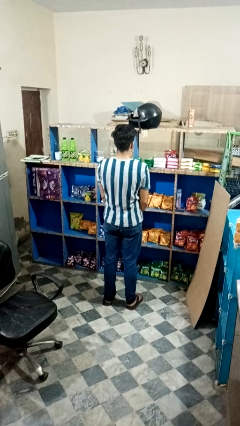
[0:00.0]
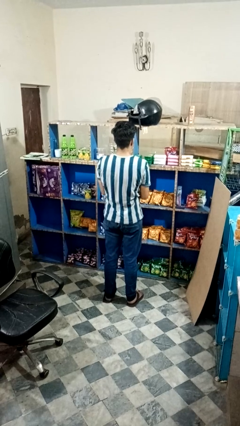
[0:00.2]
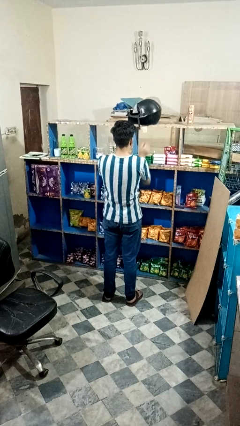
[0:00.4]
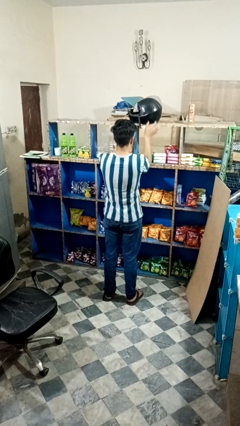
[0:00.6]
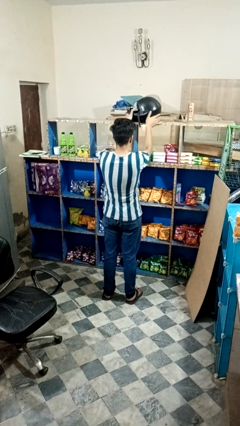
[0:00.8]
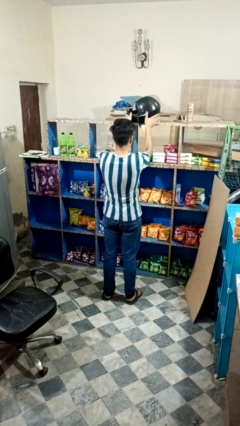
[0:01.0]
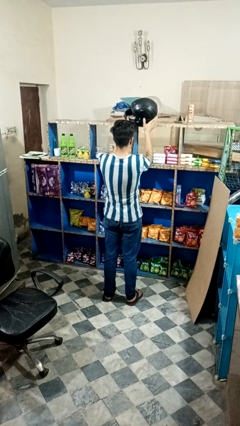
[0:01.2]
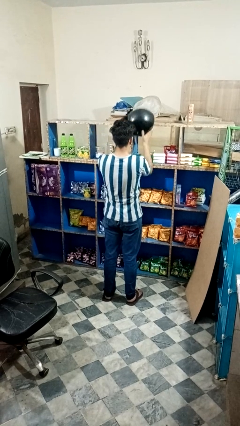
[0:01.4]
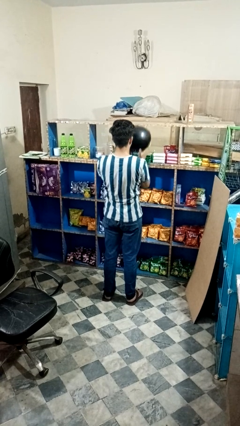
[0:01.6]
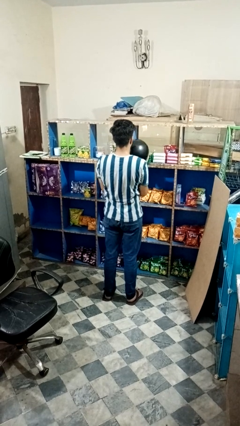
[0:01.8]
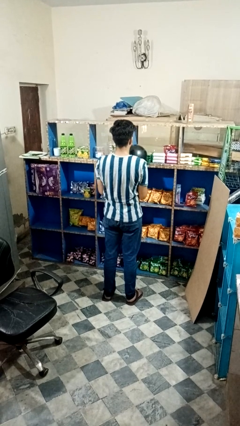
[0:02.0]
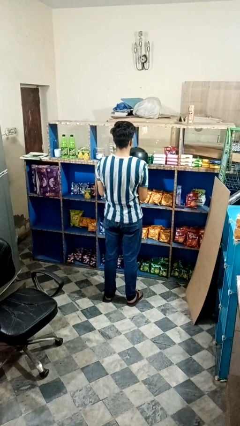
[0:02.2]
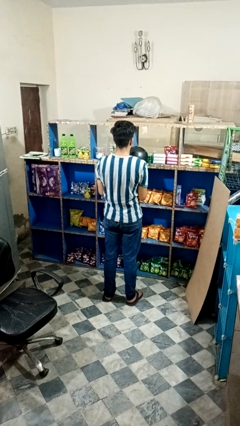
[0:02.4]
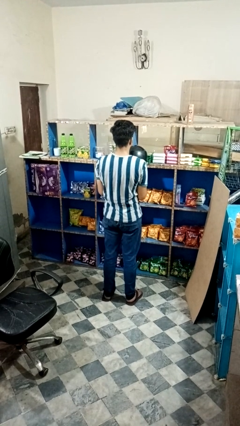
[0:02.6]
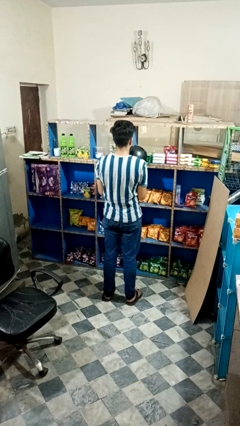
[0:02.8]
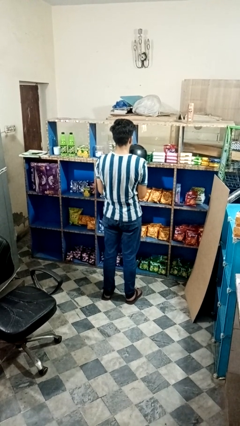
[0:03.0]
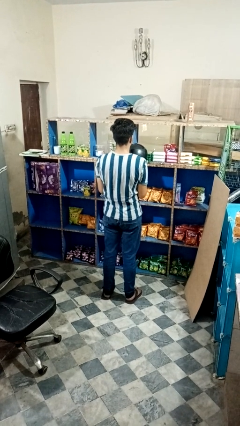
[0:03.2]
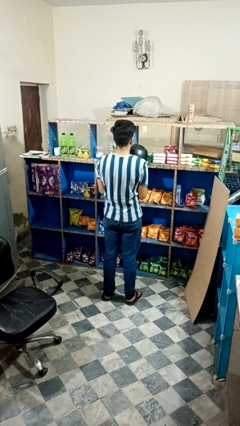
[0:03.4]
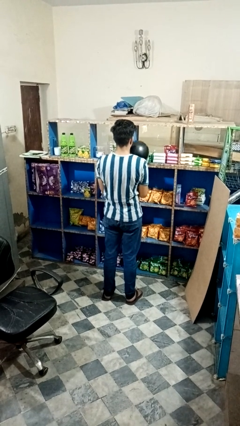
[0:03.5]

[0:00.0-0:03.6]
person picks up object from countertop

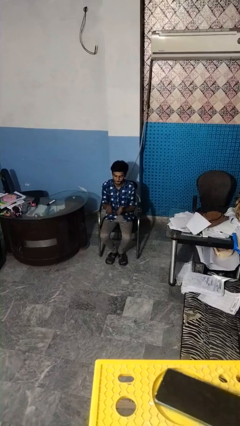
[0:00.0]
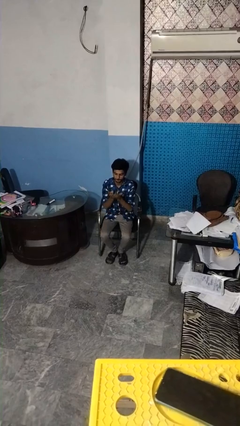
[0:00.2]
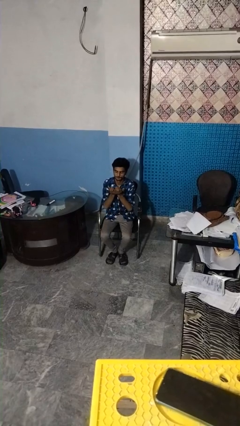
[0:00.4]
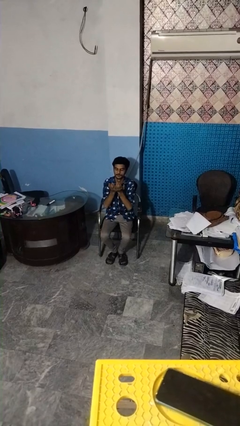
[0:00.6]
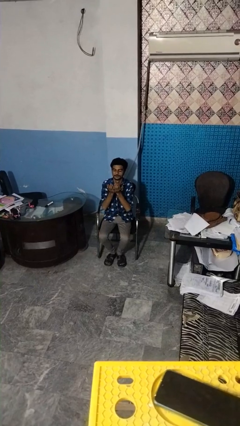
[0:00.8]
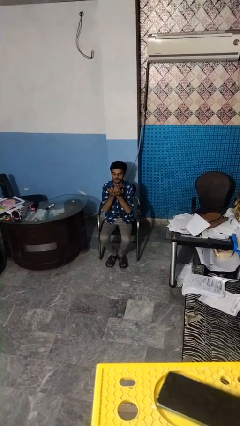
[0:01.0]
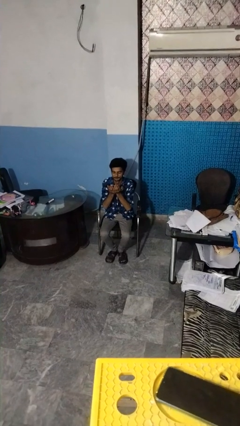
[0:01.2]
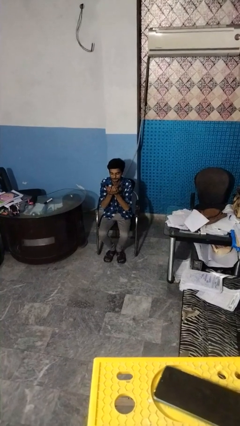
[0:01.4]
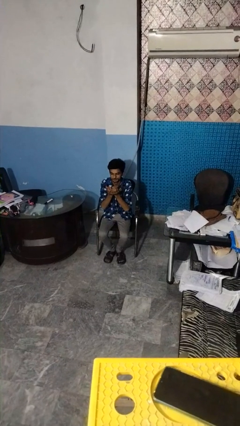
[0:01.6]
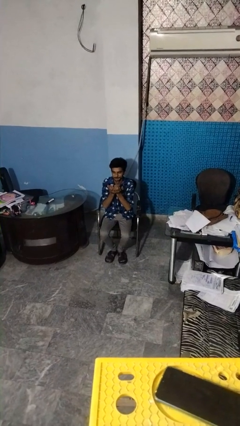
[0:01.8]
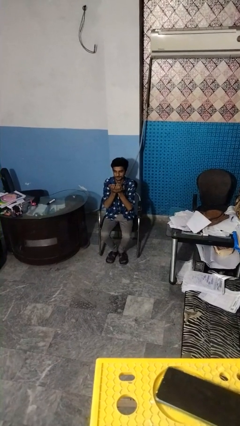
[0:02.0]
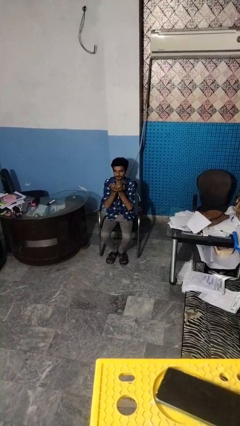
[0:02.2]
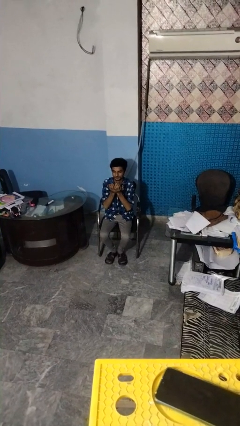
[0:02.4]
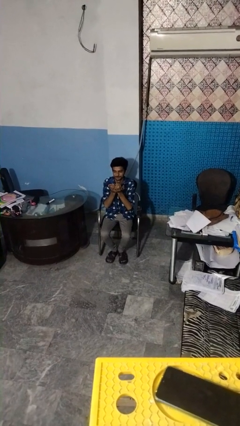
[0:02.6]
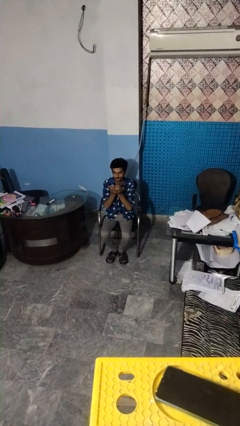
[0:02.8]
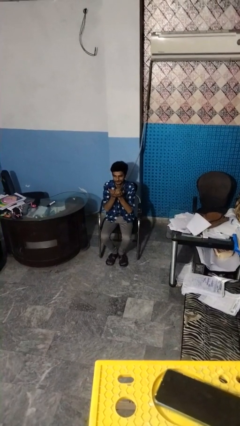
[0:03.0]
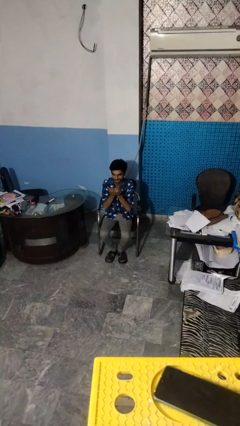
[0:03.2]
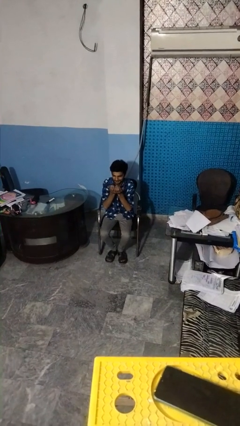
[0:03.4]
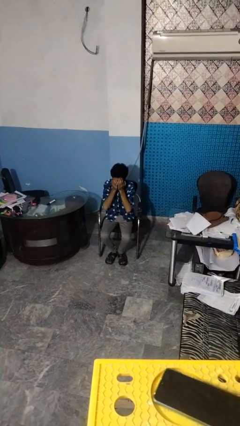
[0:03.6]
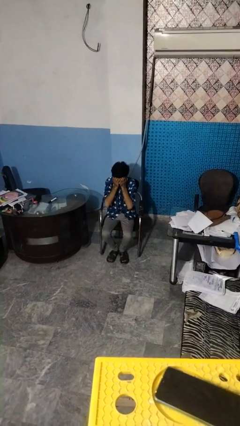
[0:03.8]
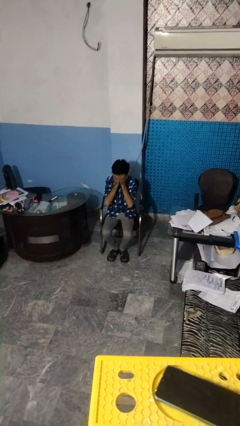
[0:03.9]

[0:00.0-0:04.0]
person prays

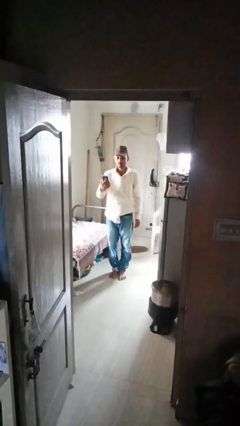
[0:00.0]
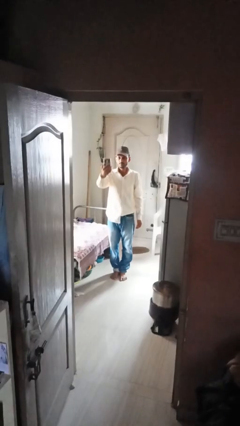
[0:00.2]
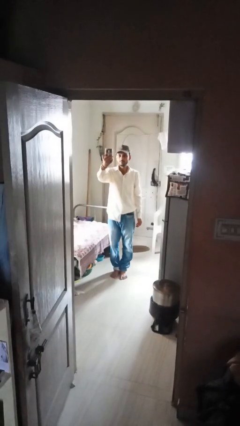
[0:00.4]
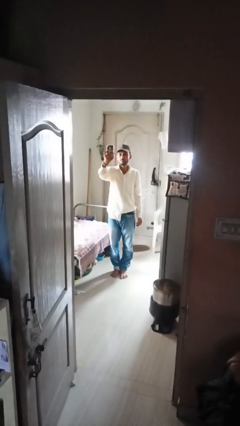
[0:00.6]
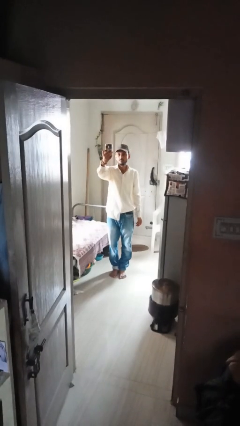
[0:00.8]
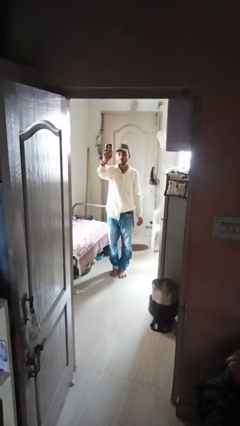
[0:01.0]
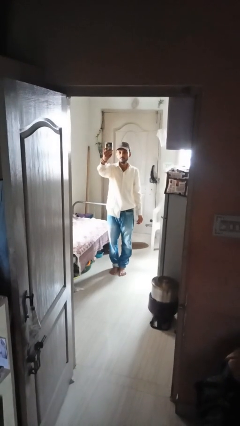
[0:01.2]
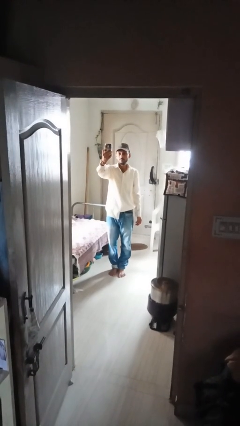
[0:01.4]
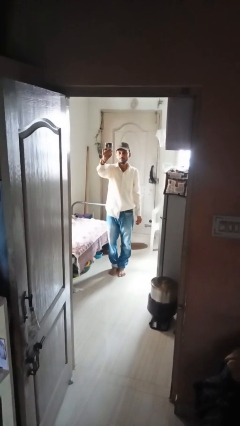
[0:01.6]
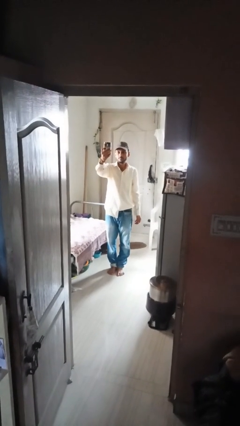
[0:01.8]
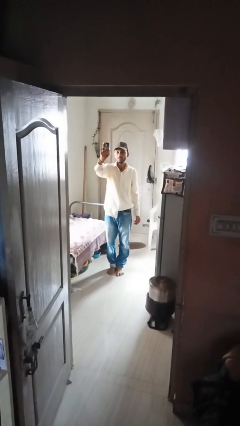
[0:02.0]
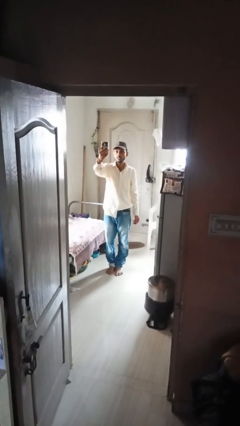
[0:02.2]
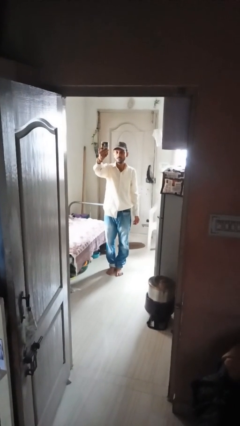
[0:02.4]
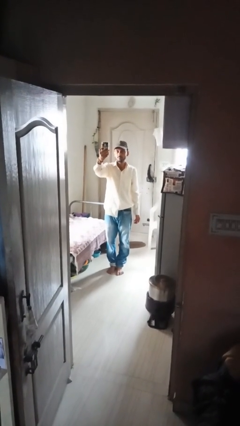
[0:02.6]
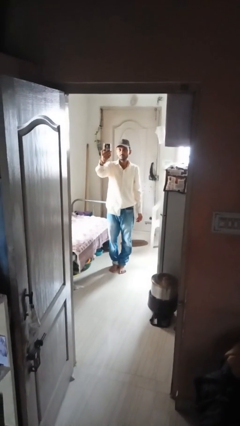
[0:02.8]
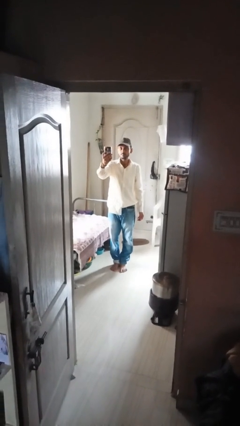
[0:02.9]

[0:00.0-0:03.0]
person takes selfie

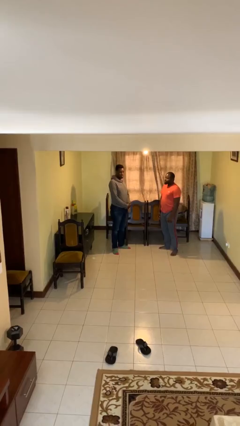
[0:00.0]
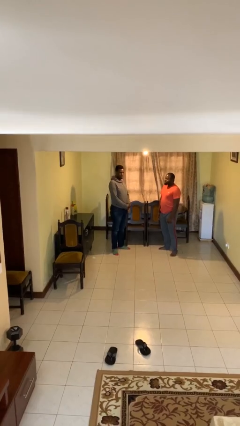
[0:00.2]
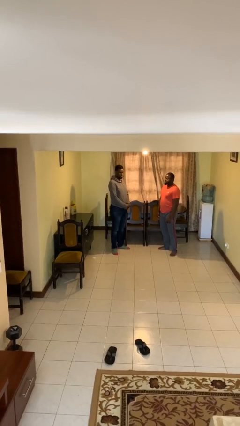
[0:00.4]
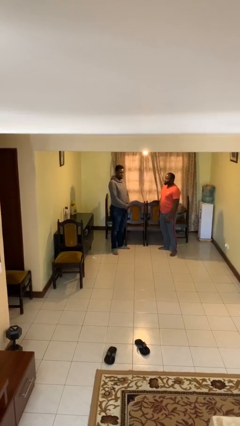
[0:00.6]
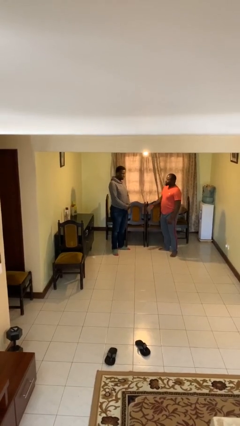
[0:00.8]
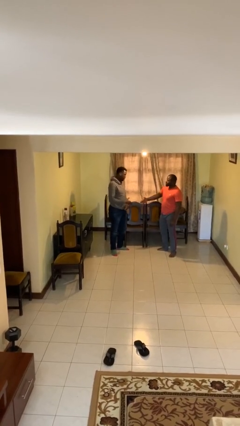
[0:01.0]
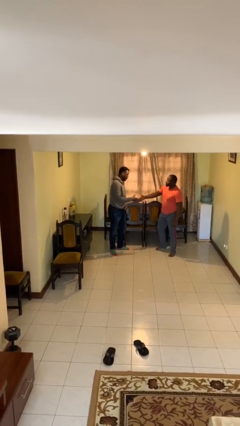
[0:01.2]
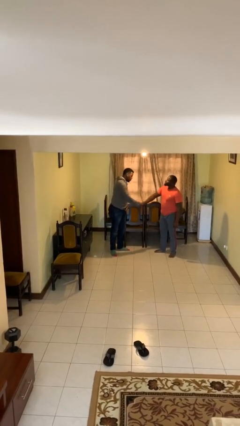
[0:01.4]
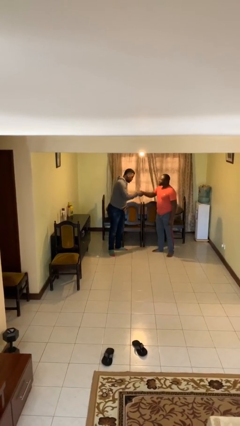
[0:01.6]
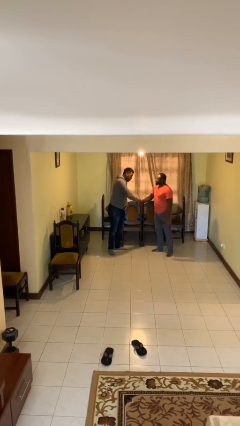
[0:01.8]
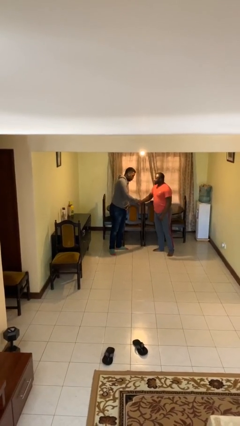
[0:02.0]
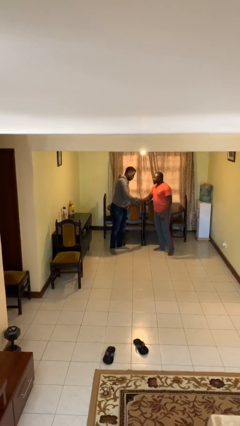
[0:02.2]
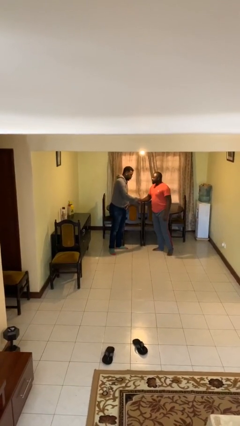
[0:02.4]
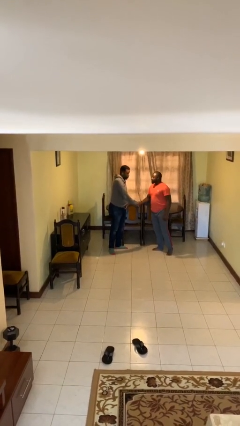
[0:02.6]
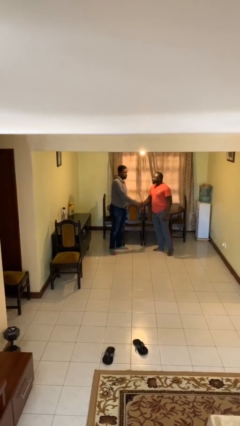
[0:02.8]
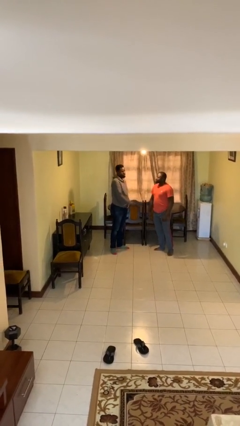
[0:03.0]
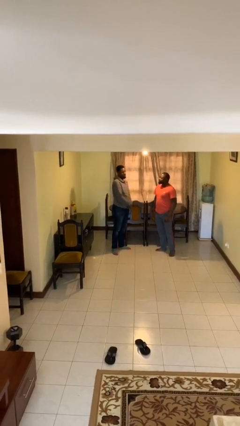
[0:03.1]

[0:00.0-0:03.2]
person shakes hand

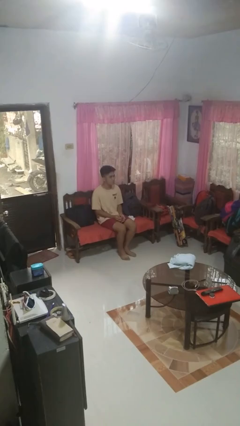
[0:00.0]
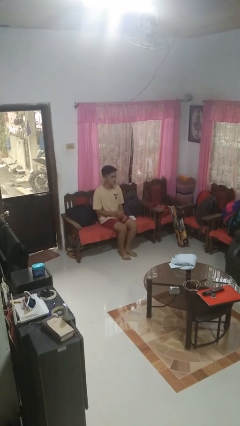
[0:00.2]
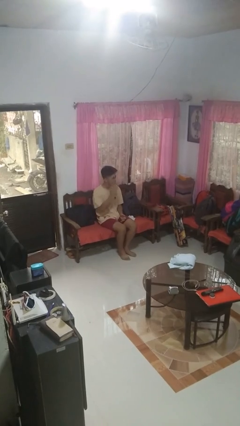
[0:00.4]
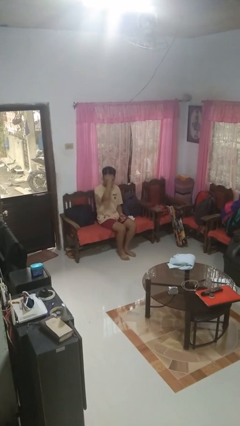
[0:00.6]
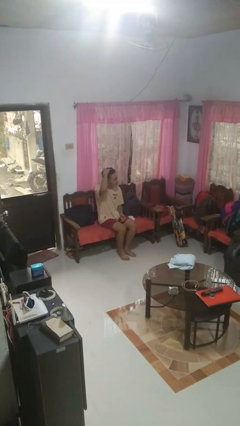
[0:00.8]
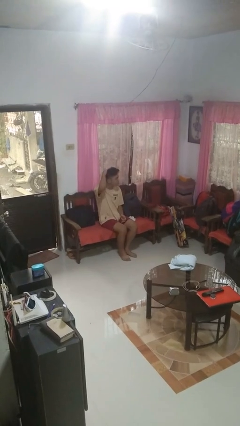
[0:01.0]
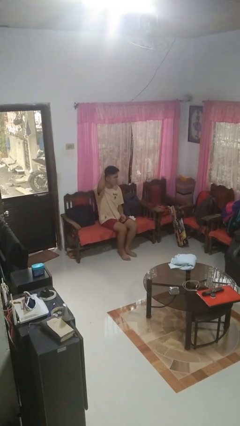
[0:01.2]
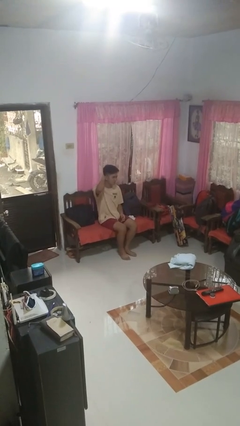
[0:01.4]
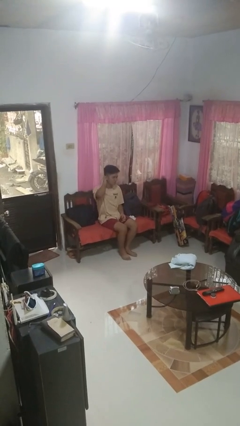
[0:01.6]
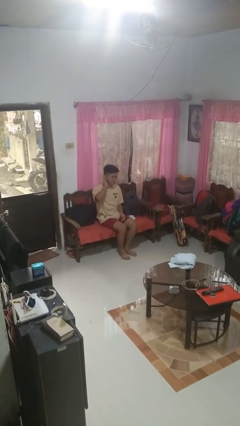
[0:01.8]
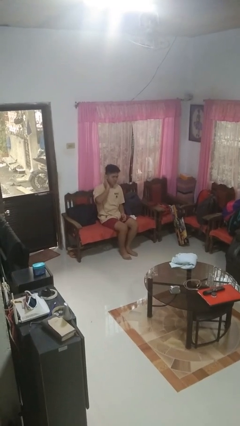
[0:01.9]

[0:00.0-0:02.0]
person strokes hair

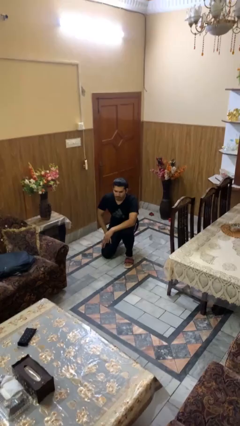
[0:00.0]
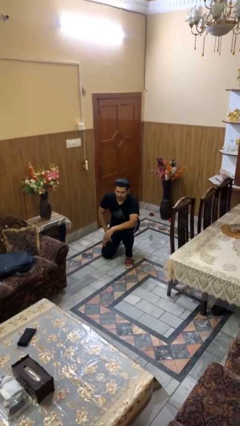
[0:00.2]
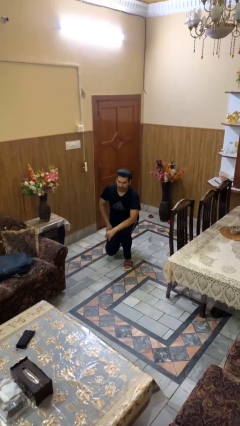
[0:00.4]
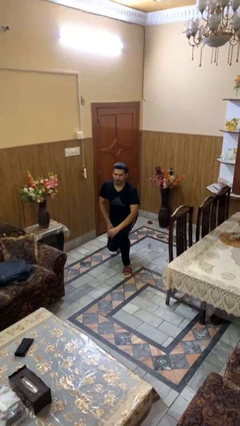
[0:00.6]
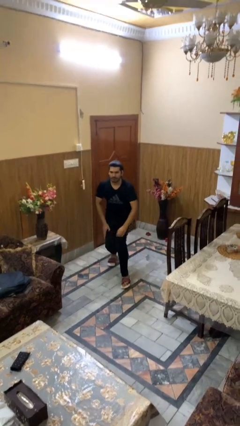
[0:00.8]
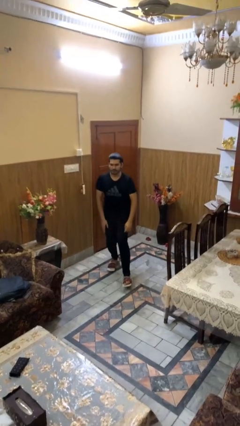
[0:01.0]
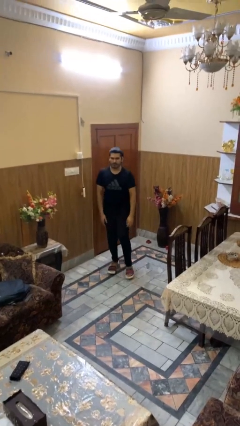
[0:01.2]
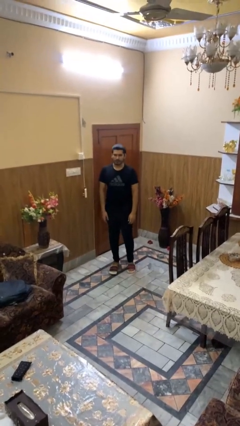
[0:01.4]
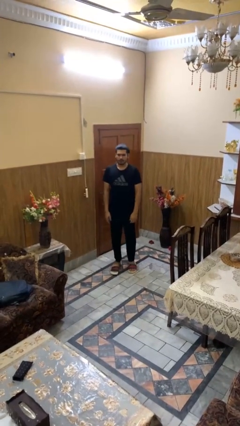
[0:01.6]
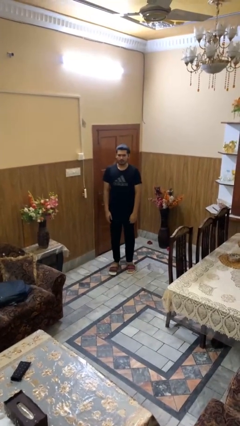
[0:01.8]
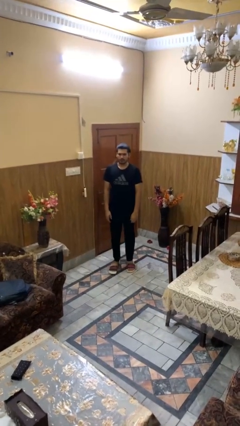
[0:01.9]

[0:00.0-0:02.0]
person stands up from floor
